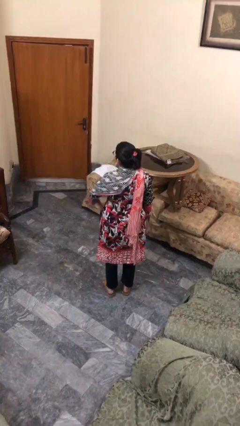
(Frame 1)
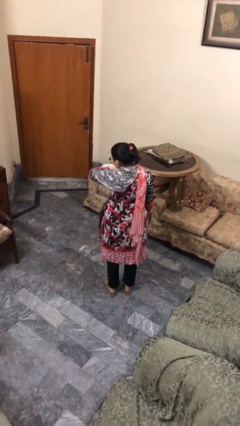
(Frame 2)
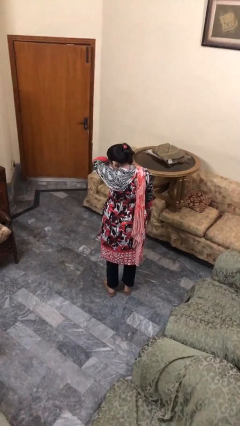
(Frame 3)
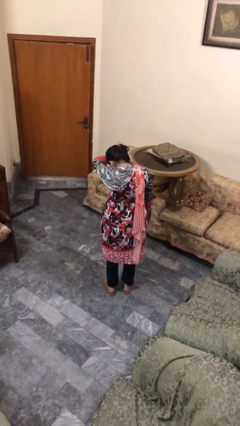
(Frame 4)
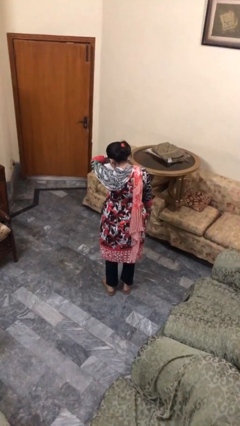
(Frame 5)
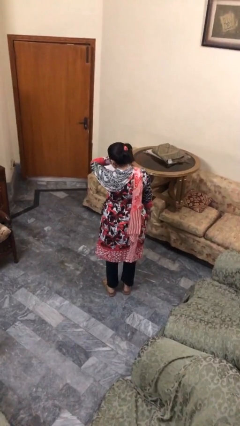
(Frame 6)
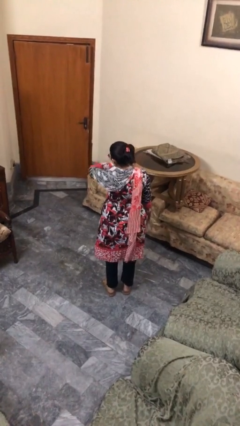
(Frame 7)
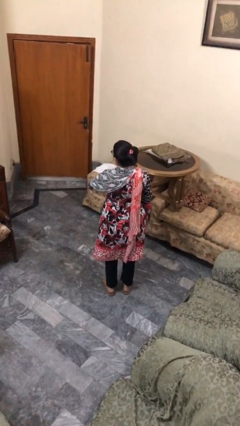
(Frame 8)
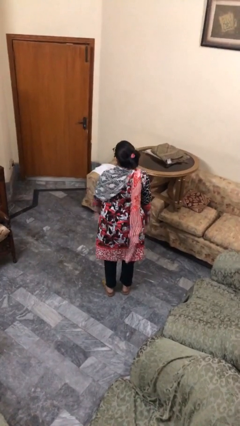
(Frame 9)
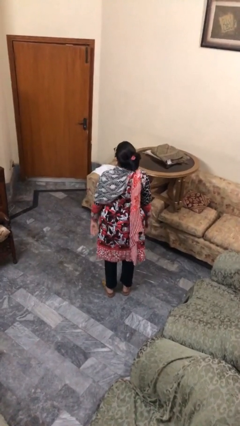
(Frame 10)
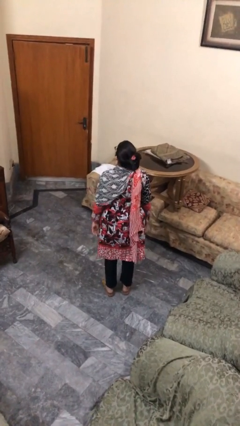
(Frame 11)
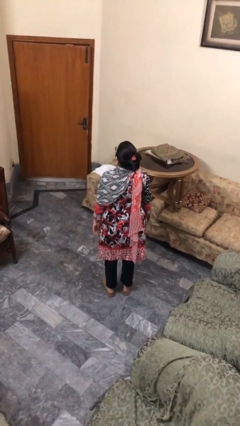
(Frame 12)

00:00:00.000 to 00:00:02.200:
person sneezes into arm

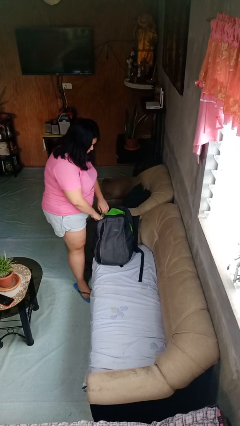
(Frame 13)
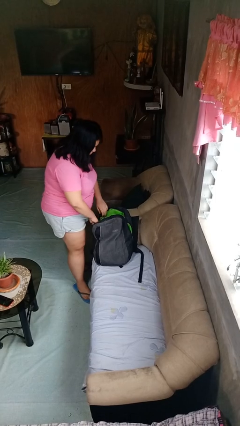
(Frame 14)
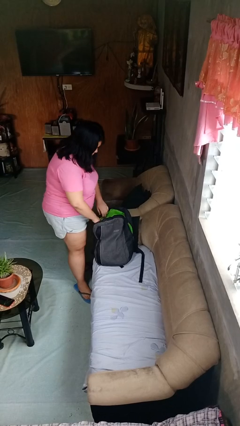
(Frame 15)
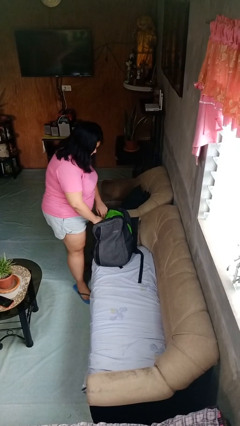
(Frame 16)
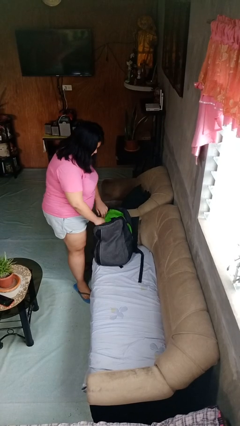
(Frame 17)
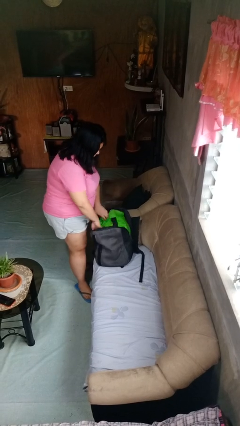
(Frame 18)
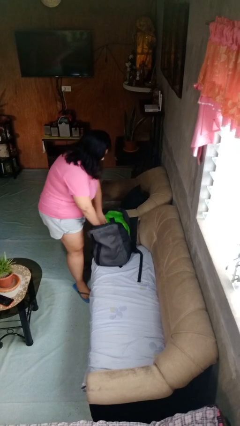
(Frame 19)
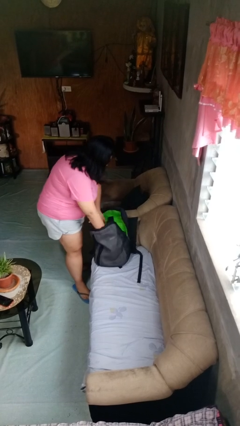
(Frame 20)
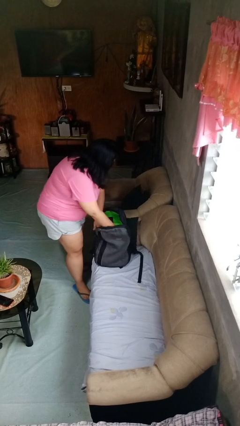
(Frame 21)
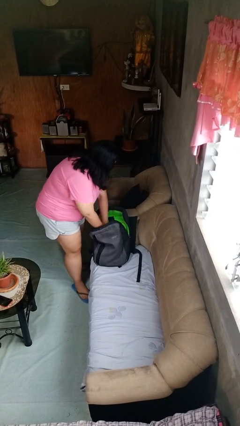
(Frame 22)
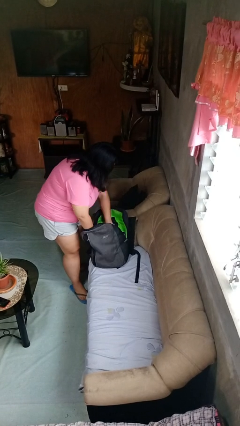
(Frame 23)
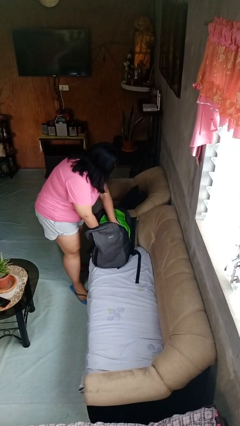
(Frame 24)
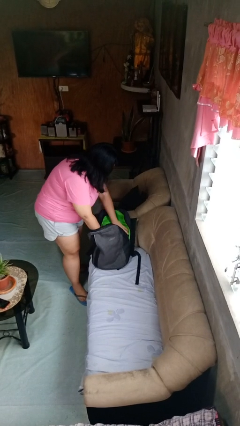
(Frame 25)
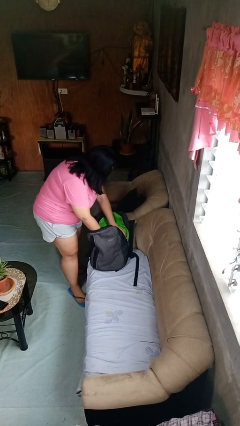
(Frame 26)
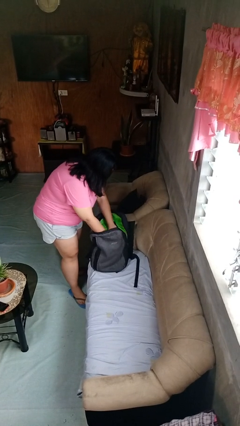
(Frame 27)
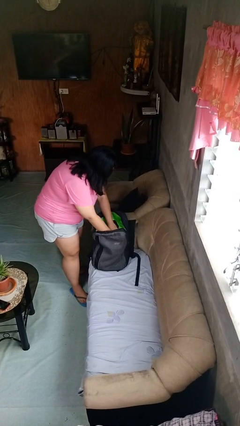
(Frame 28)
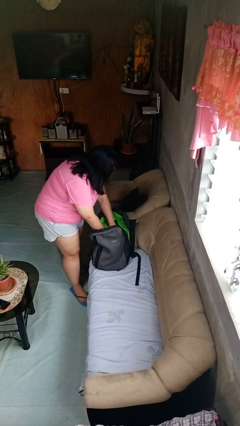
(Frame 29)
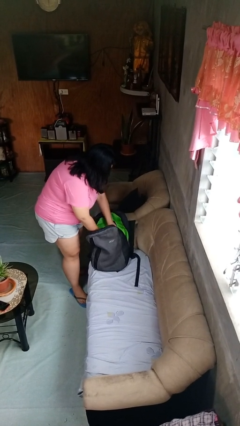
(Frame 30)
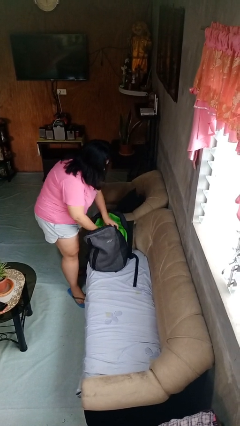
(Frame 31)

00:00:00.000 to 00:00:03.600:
person searches in backpack

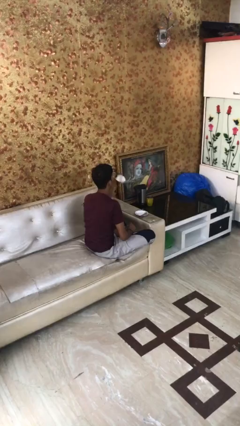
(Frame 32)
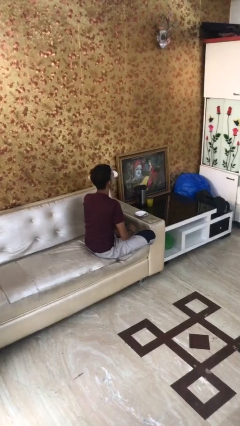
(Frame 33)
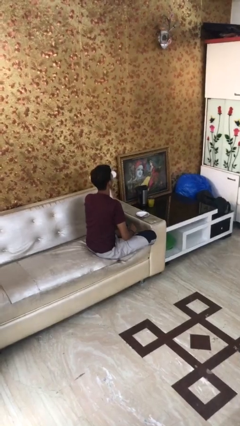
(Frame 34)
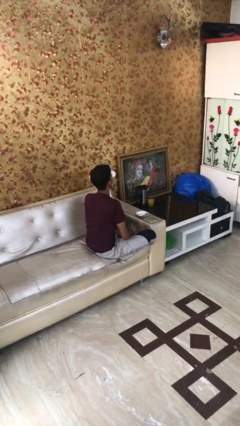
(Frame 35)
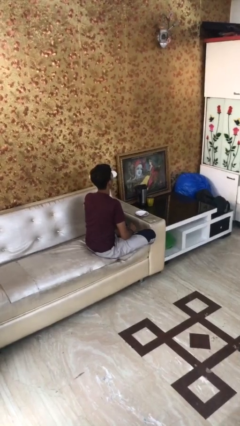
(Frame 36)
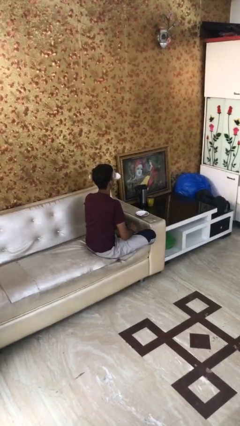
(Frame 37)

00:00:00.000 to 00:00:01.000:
person drinks from mug

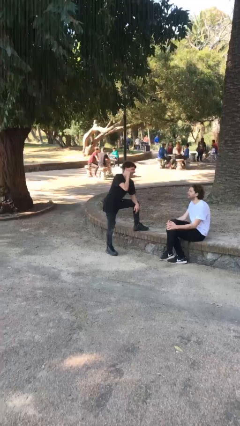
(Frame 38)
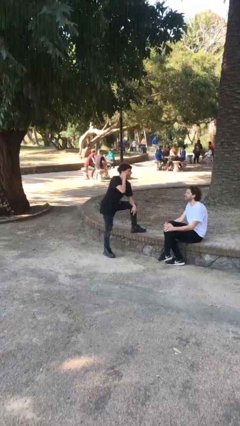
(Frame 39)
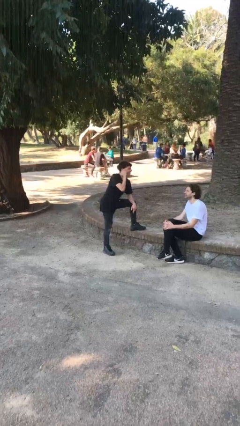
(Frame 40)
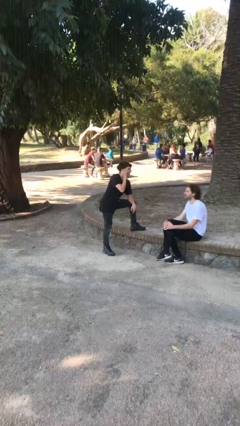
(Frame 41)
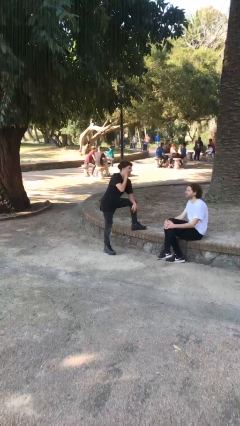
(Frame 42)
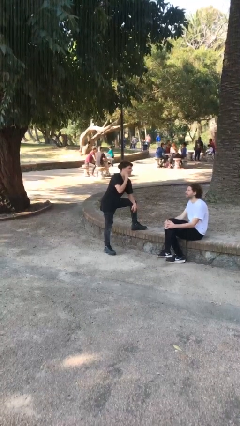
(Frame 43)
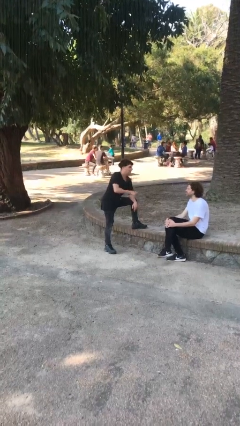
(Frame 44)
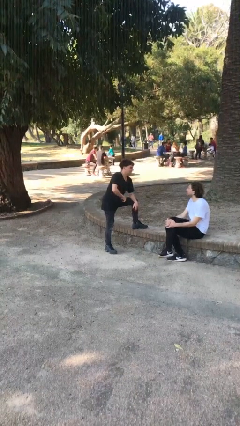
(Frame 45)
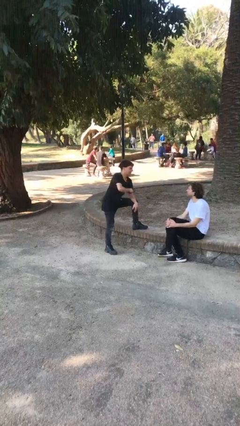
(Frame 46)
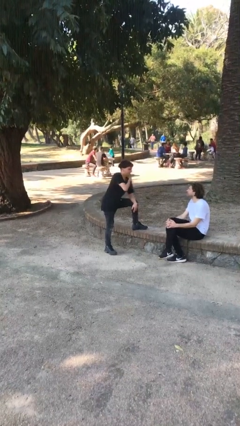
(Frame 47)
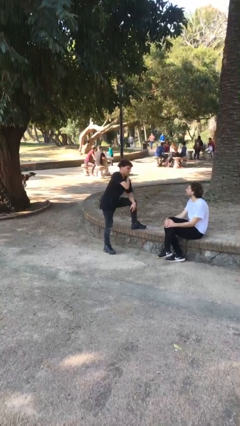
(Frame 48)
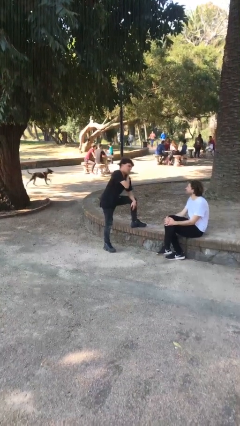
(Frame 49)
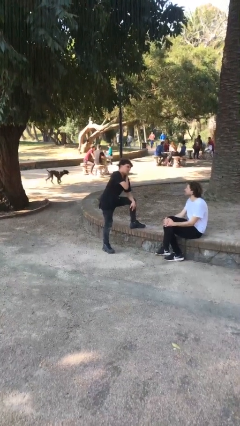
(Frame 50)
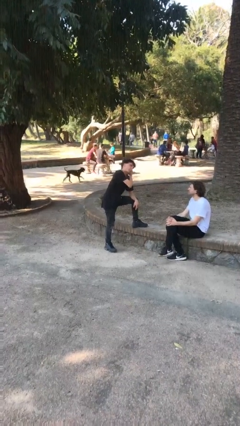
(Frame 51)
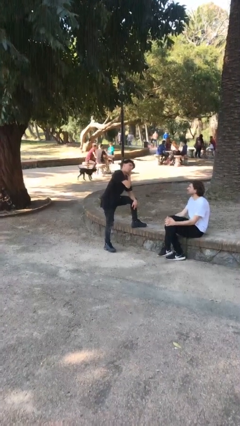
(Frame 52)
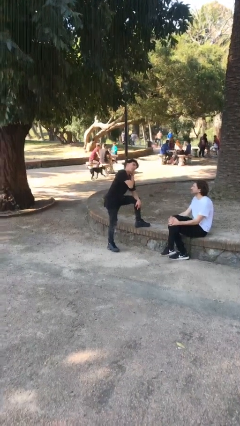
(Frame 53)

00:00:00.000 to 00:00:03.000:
person talks to person

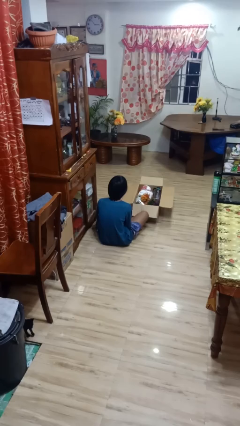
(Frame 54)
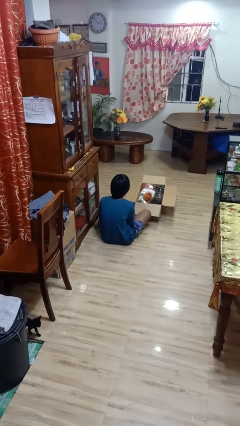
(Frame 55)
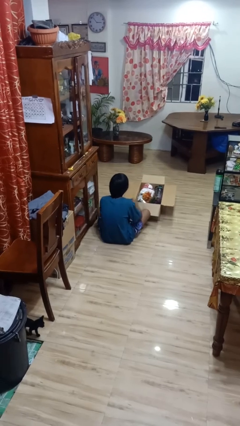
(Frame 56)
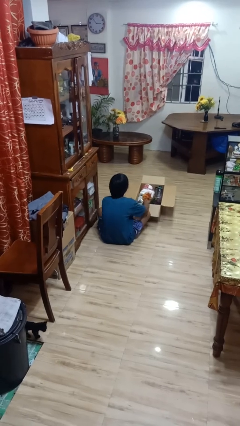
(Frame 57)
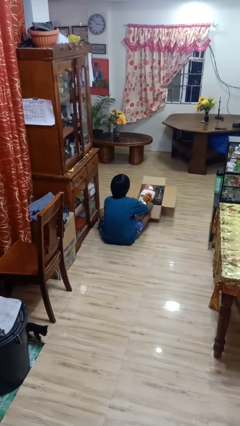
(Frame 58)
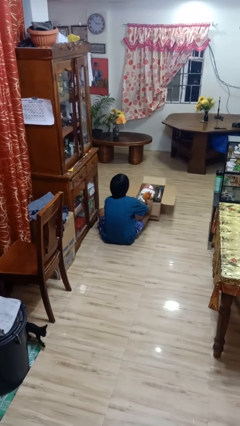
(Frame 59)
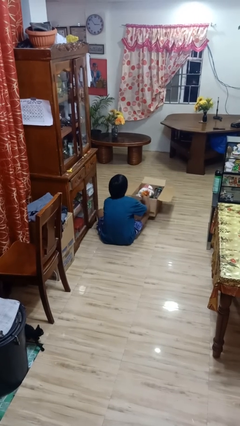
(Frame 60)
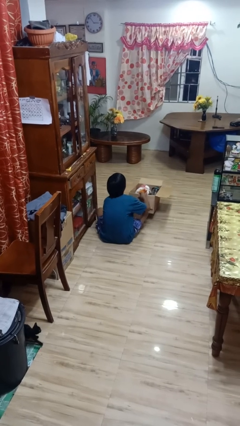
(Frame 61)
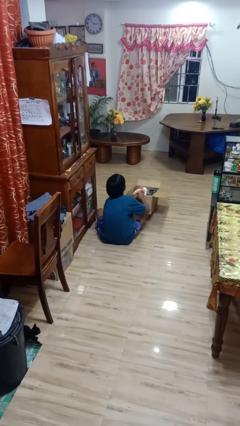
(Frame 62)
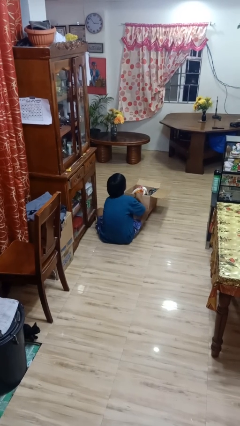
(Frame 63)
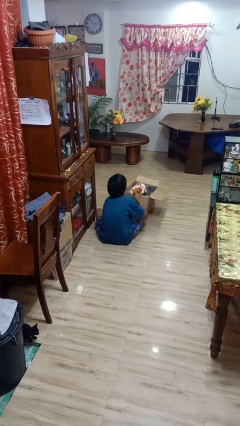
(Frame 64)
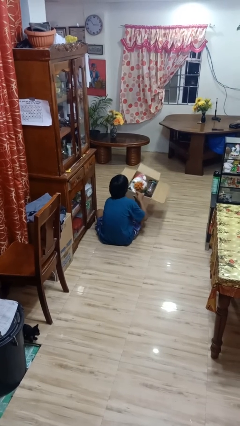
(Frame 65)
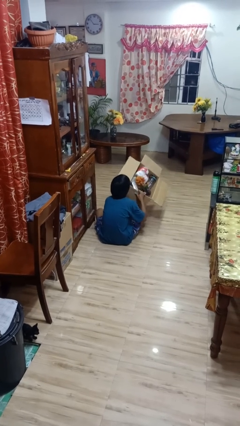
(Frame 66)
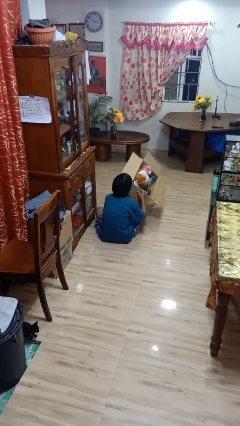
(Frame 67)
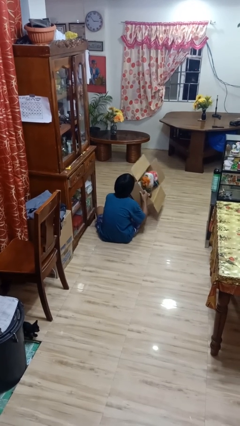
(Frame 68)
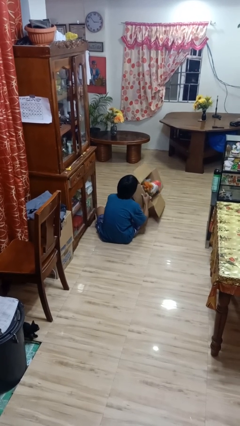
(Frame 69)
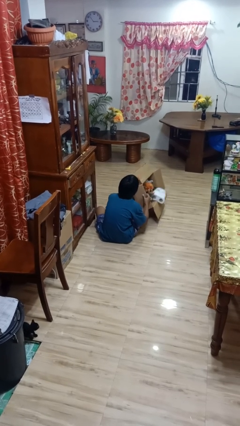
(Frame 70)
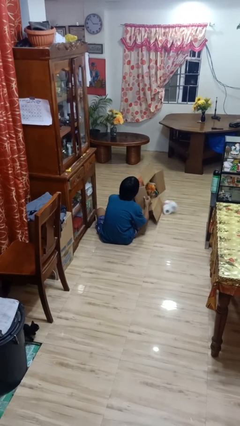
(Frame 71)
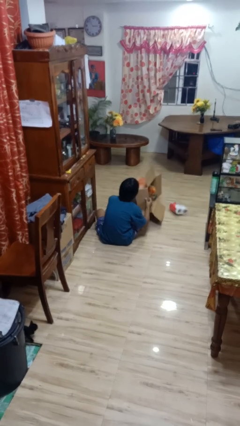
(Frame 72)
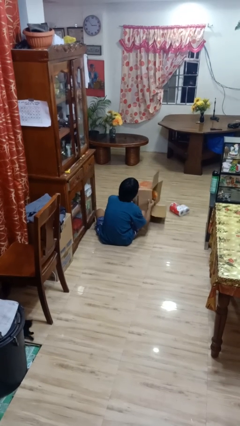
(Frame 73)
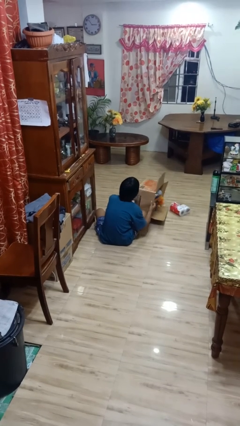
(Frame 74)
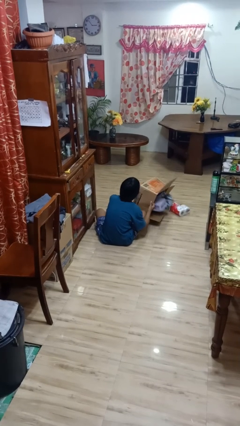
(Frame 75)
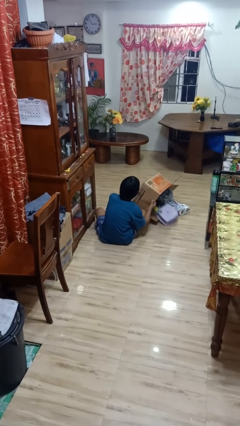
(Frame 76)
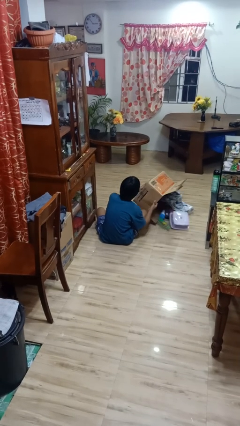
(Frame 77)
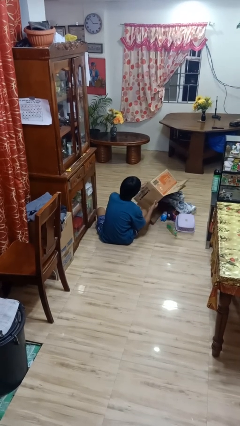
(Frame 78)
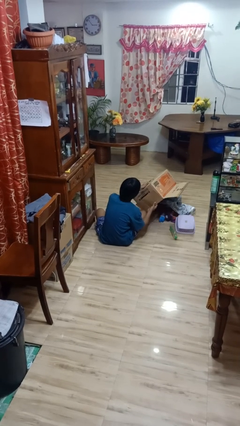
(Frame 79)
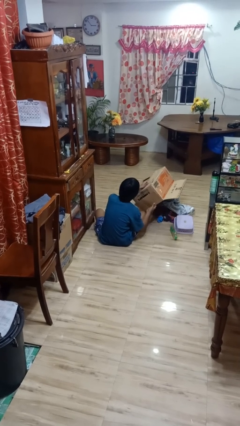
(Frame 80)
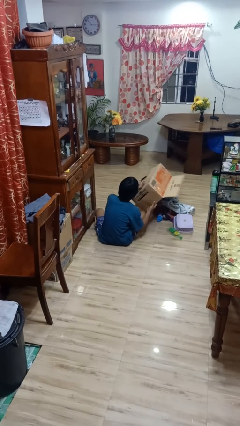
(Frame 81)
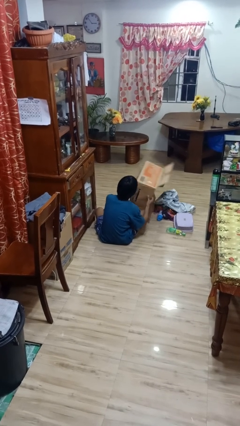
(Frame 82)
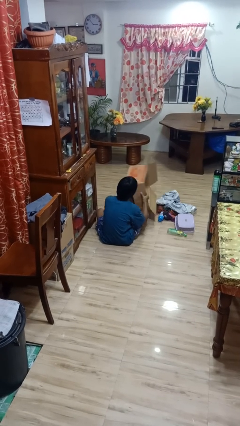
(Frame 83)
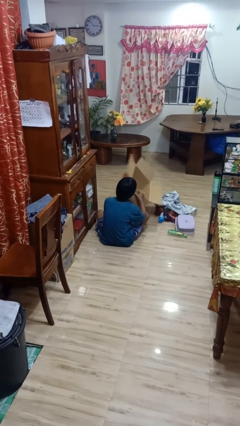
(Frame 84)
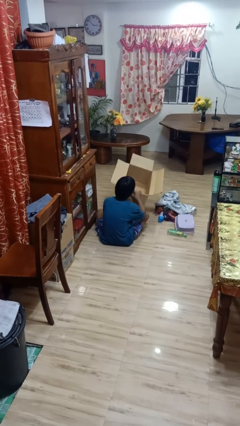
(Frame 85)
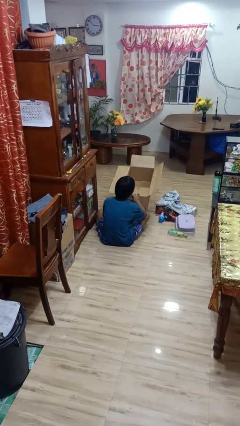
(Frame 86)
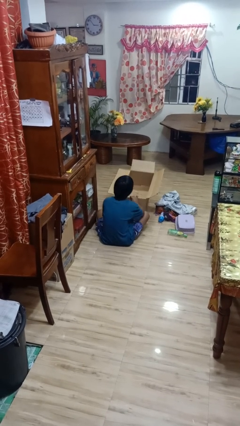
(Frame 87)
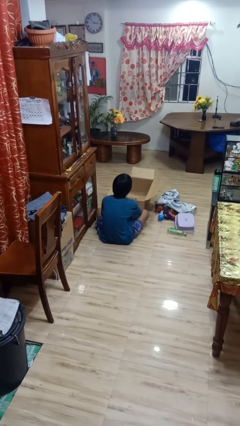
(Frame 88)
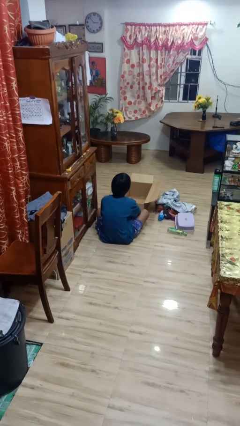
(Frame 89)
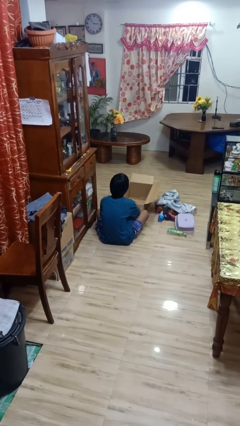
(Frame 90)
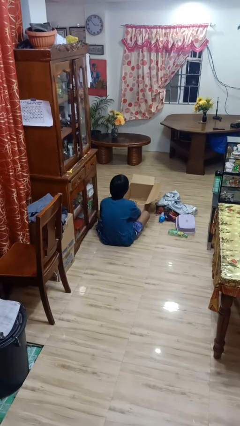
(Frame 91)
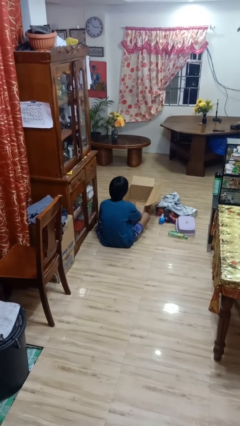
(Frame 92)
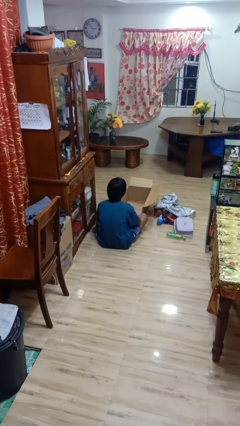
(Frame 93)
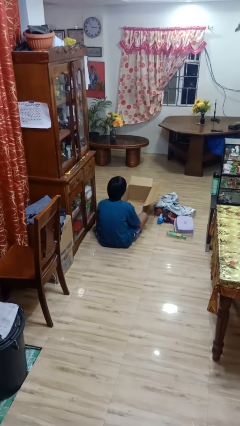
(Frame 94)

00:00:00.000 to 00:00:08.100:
person unloads box onto floor
